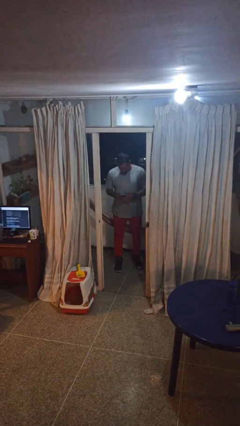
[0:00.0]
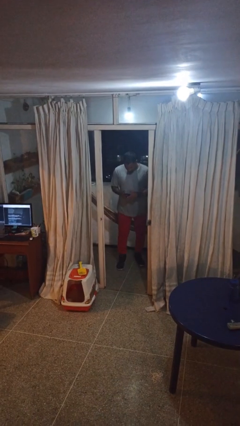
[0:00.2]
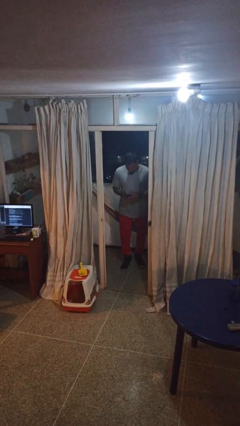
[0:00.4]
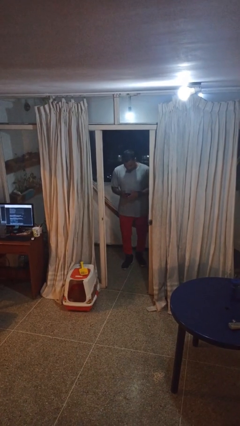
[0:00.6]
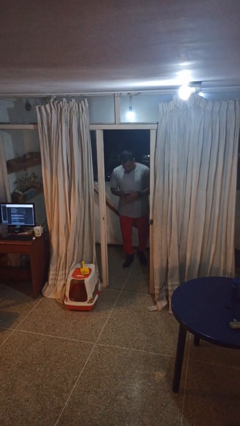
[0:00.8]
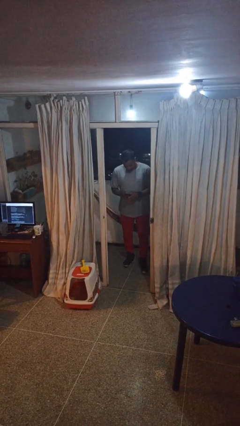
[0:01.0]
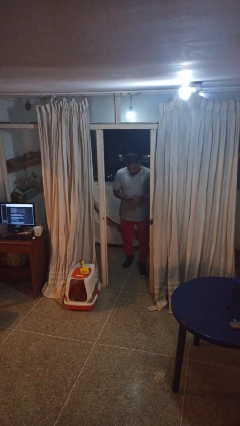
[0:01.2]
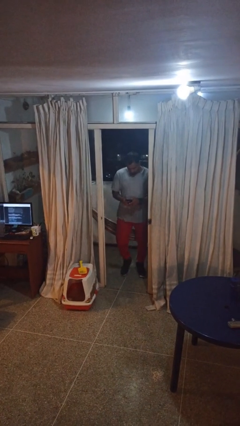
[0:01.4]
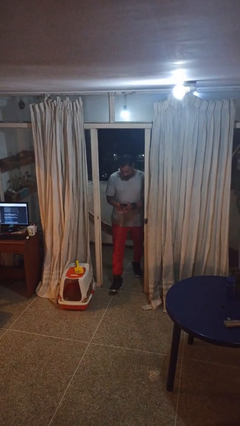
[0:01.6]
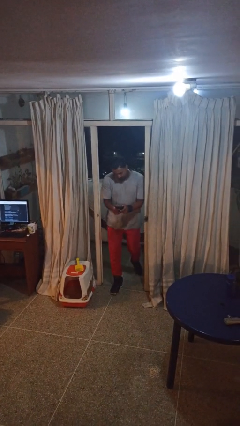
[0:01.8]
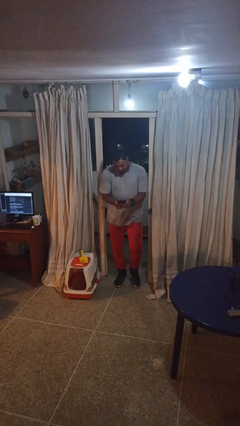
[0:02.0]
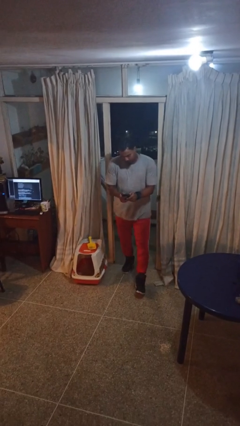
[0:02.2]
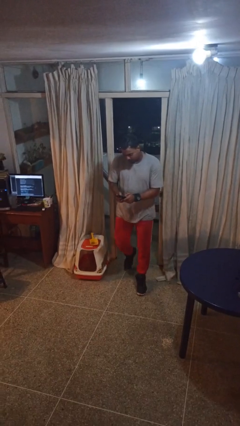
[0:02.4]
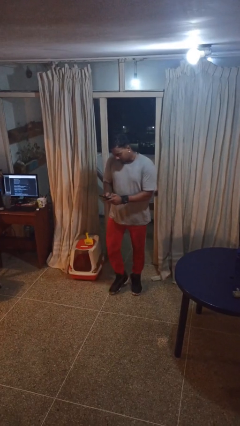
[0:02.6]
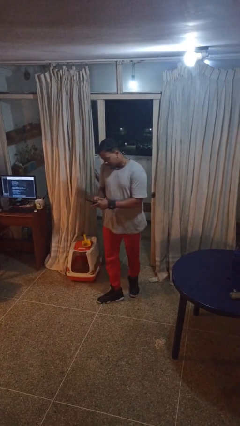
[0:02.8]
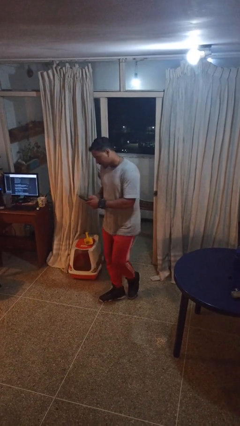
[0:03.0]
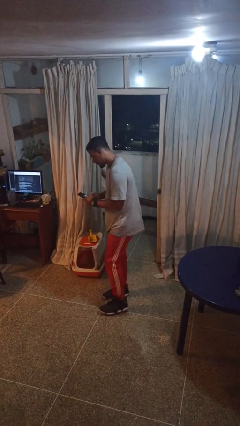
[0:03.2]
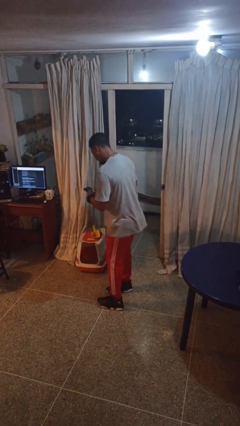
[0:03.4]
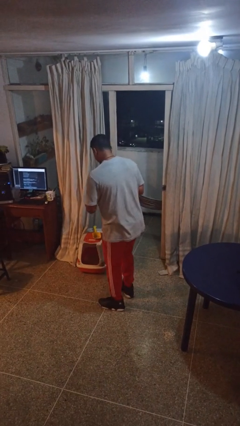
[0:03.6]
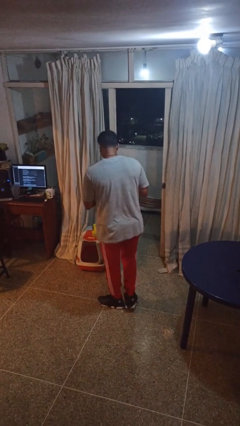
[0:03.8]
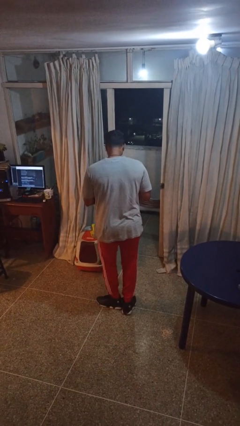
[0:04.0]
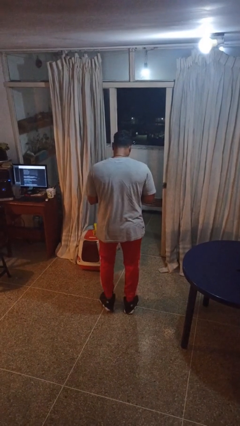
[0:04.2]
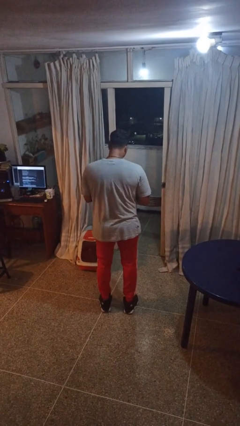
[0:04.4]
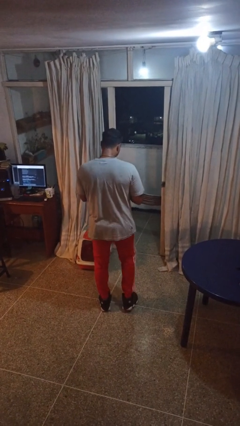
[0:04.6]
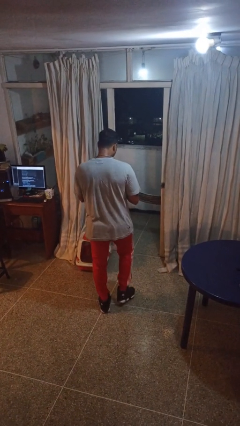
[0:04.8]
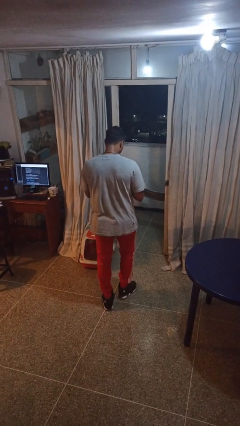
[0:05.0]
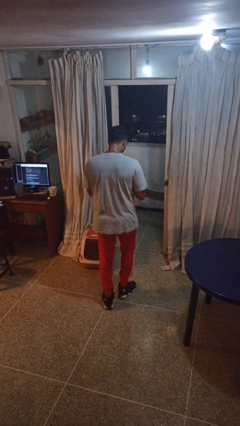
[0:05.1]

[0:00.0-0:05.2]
person enters scene through structure

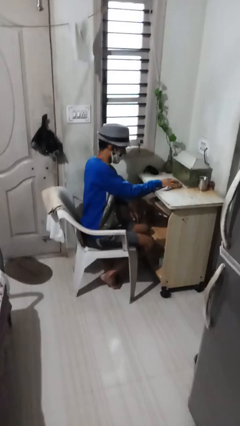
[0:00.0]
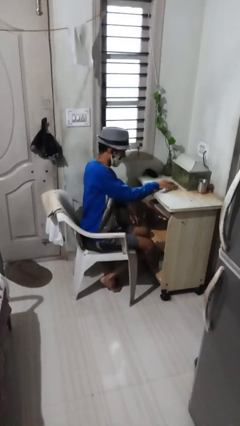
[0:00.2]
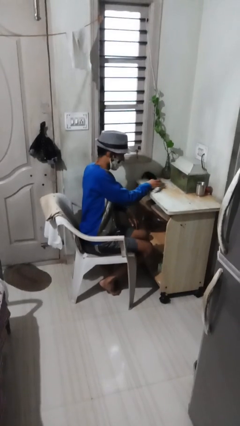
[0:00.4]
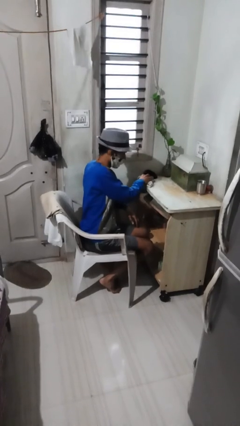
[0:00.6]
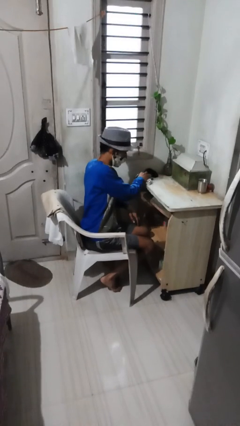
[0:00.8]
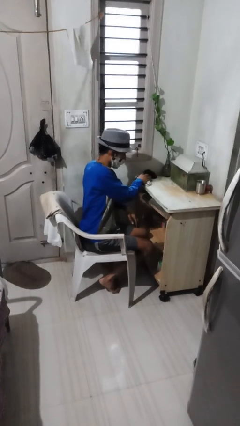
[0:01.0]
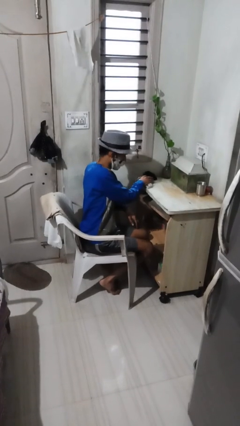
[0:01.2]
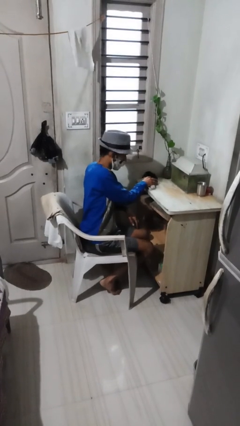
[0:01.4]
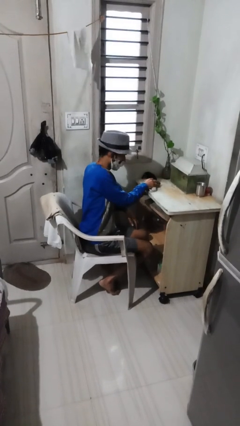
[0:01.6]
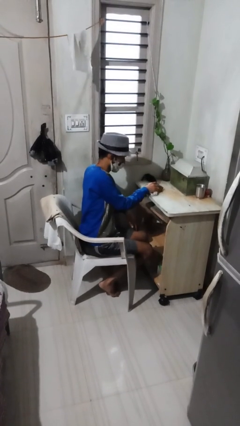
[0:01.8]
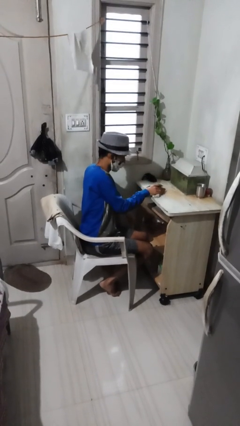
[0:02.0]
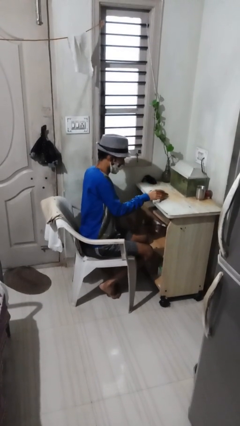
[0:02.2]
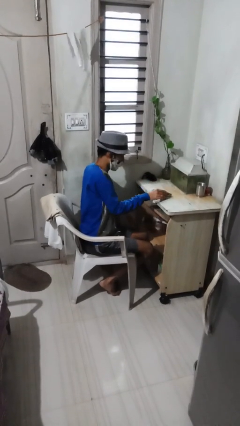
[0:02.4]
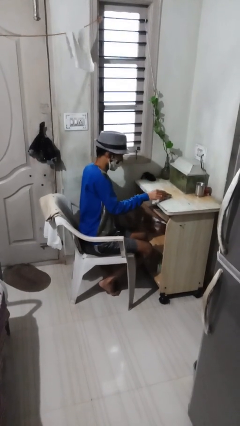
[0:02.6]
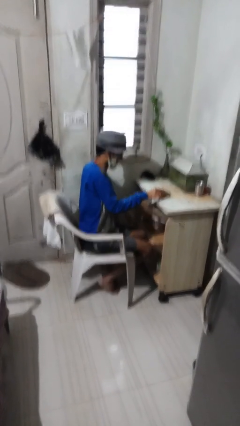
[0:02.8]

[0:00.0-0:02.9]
person cleans table with rag

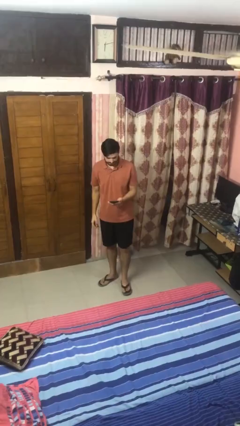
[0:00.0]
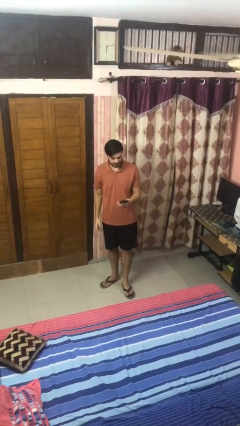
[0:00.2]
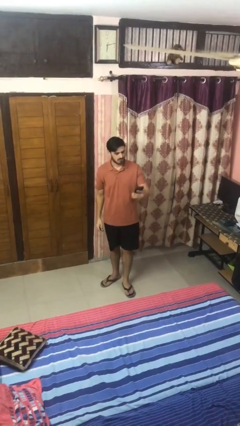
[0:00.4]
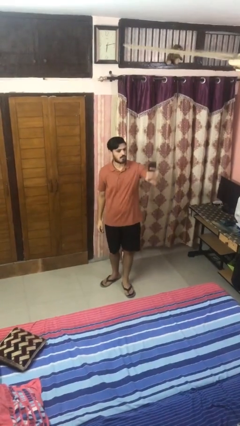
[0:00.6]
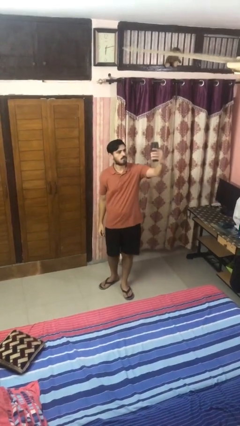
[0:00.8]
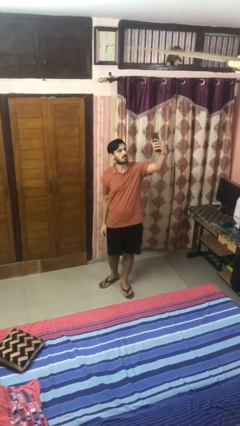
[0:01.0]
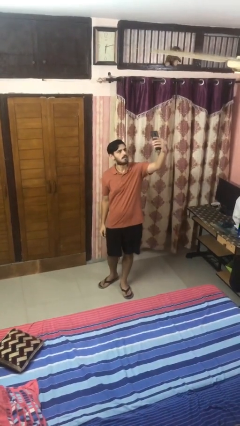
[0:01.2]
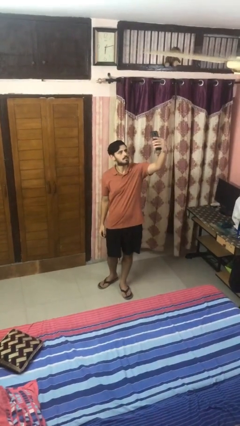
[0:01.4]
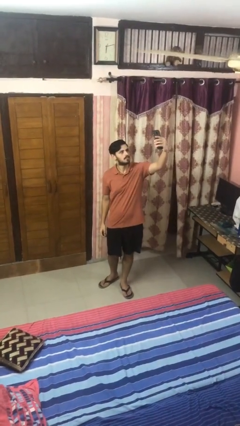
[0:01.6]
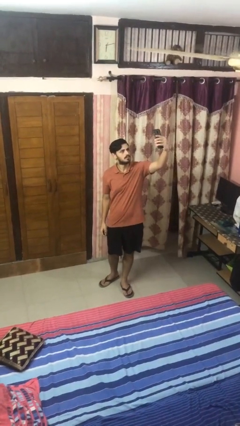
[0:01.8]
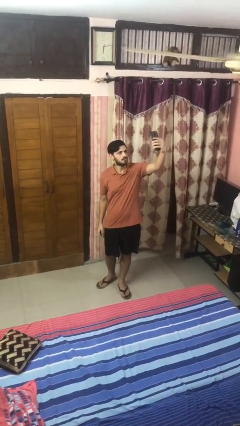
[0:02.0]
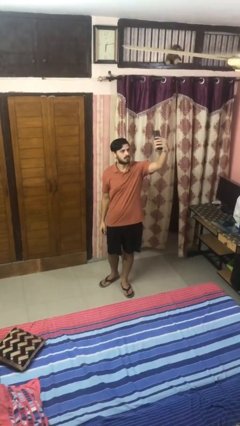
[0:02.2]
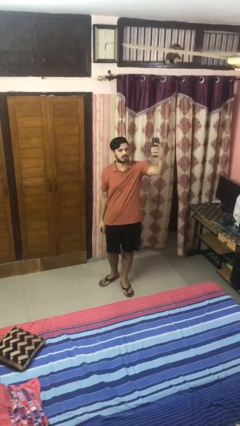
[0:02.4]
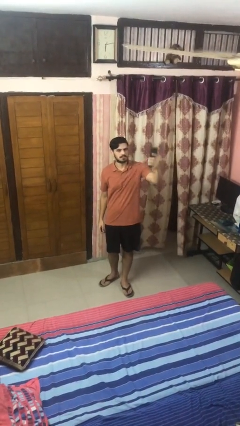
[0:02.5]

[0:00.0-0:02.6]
person takes selfie

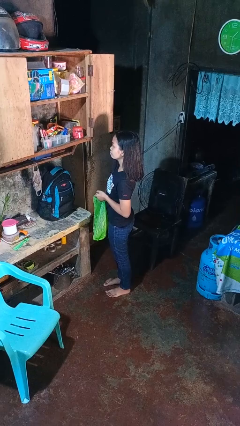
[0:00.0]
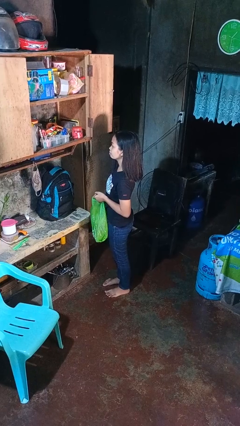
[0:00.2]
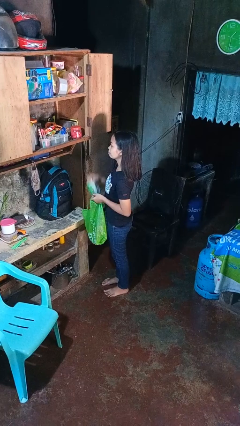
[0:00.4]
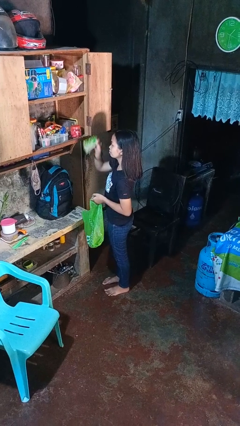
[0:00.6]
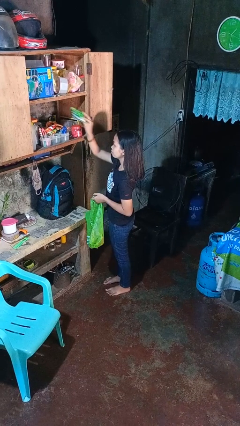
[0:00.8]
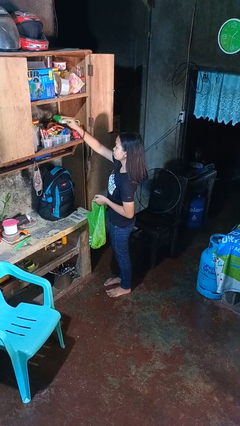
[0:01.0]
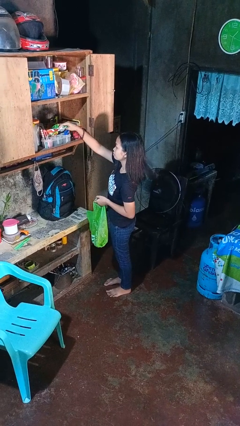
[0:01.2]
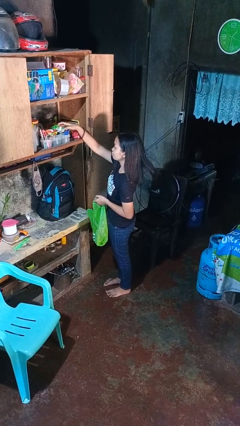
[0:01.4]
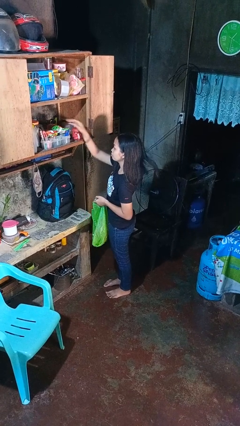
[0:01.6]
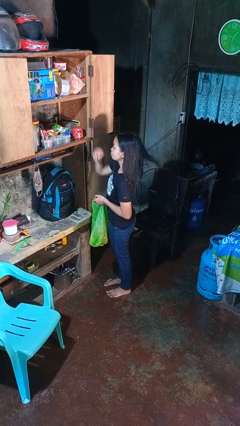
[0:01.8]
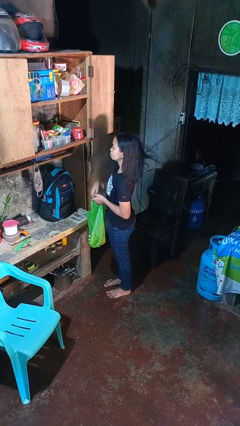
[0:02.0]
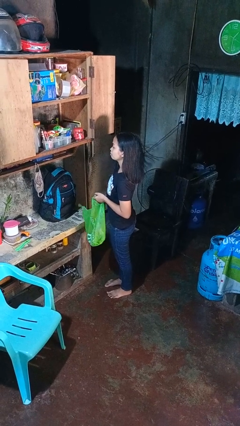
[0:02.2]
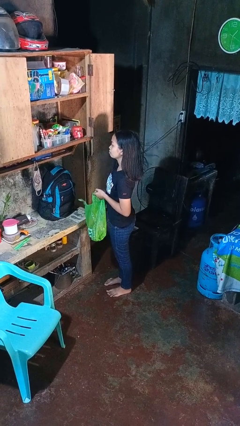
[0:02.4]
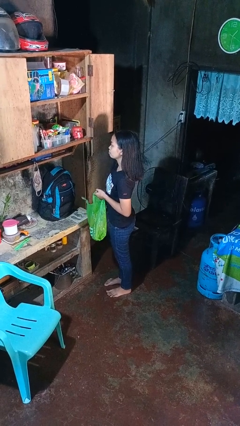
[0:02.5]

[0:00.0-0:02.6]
person loads groceries into cabinet

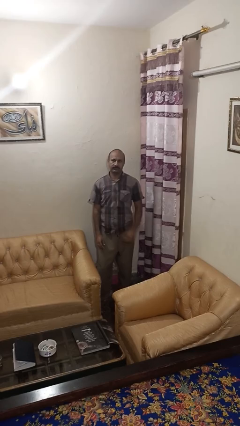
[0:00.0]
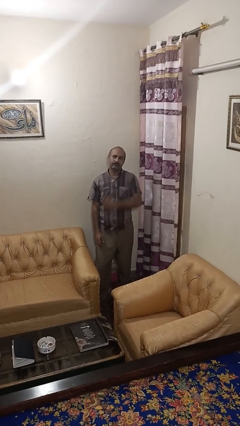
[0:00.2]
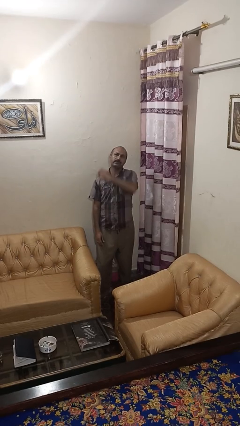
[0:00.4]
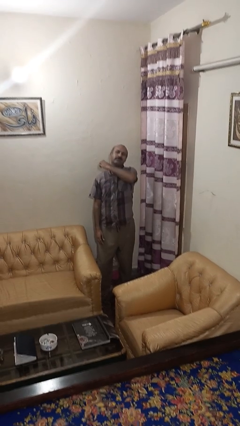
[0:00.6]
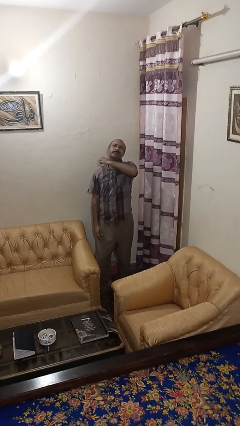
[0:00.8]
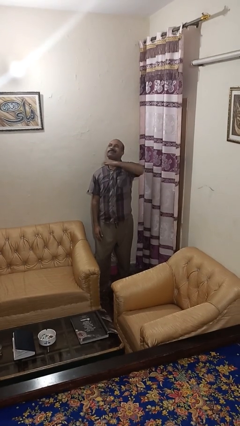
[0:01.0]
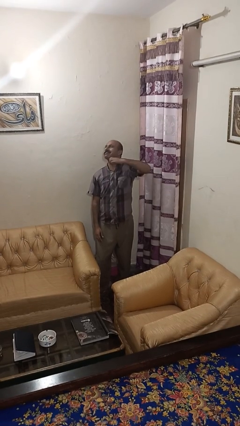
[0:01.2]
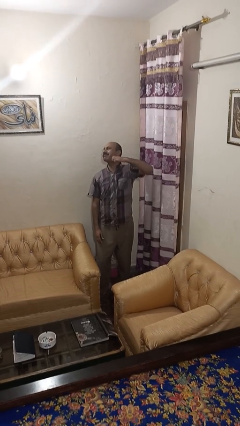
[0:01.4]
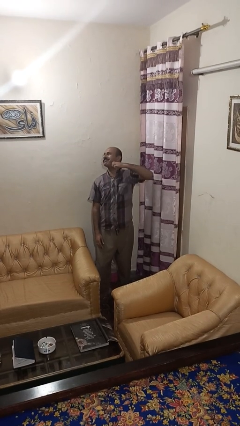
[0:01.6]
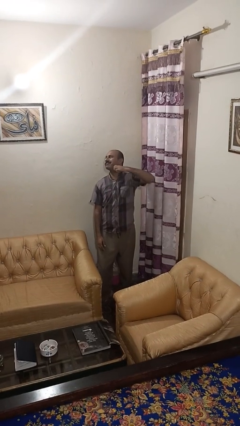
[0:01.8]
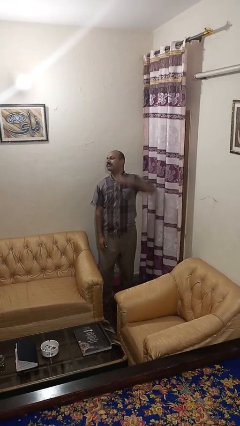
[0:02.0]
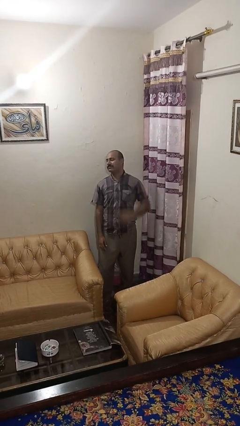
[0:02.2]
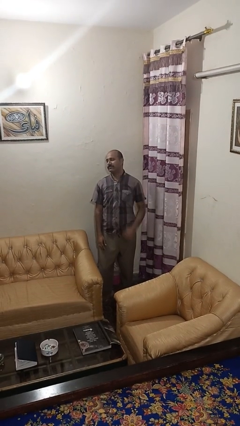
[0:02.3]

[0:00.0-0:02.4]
person gestures cut

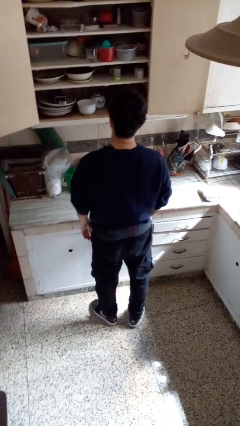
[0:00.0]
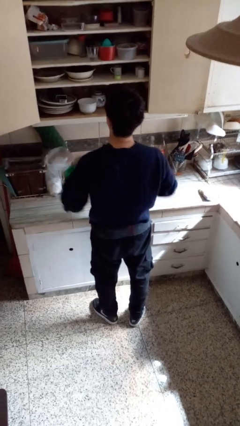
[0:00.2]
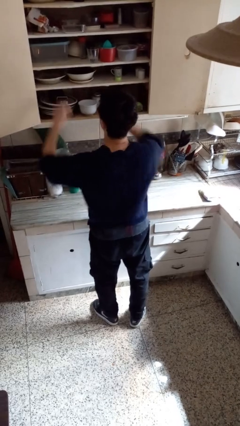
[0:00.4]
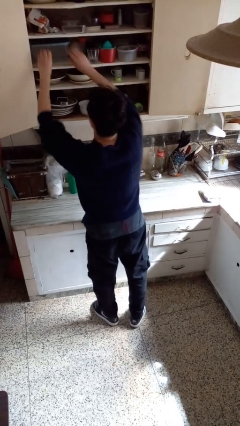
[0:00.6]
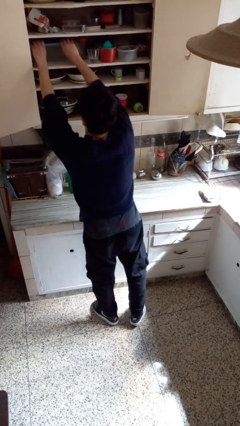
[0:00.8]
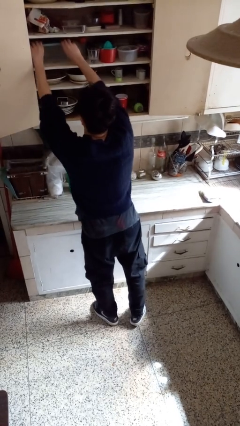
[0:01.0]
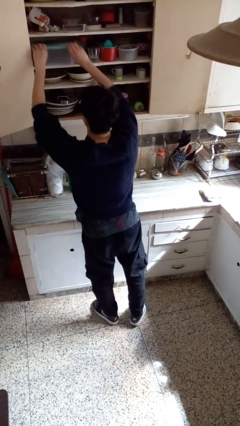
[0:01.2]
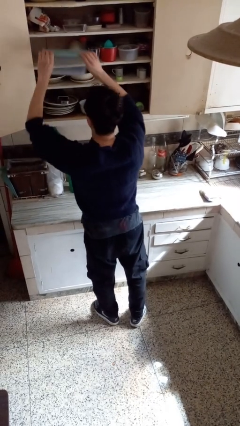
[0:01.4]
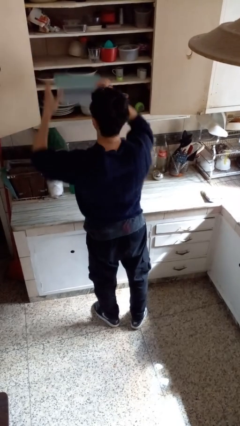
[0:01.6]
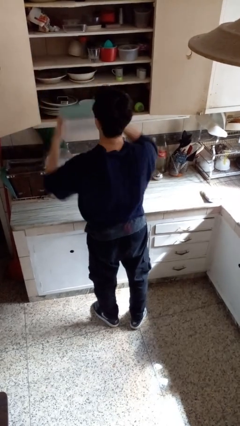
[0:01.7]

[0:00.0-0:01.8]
person picks up object from cabinet
